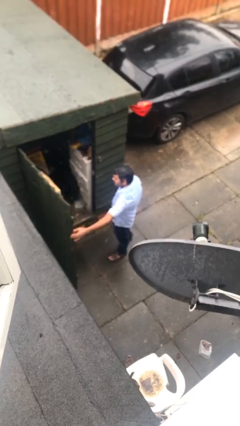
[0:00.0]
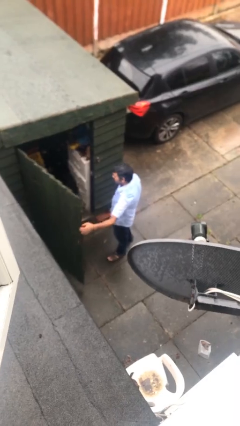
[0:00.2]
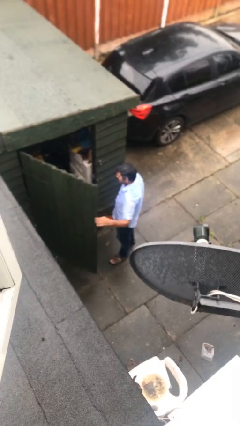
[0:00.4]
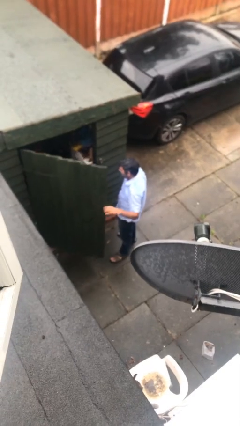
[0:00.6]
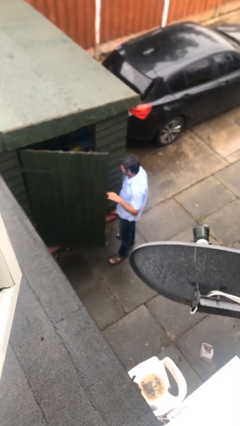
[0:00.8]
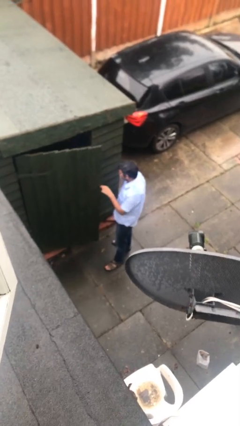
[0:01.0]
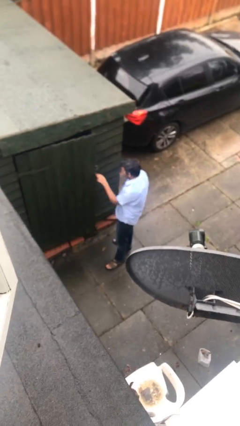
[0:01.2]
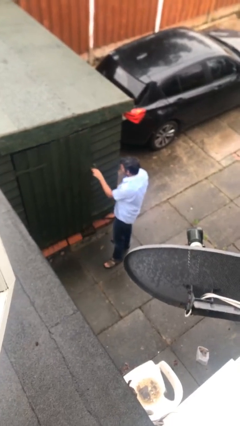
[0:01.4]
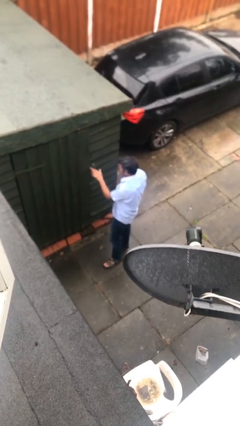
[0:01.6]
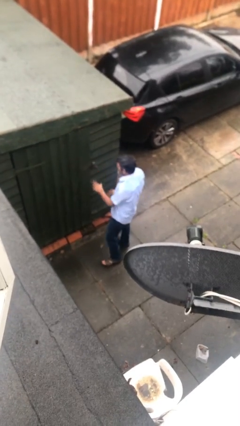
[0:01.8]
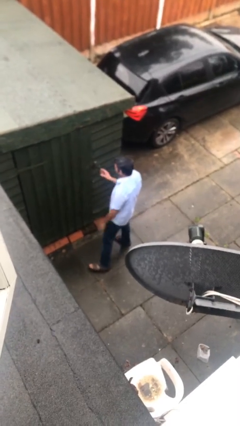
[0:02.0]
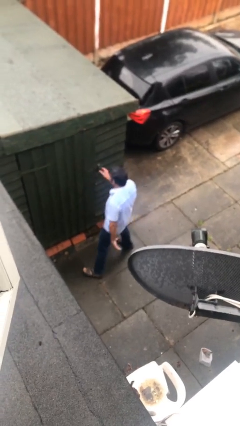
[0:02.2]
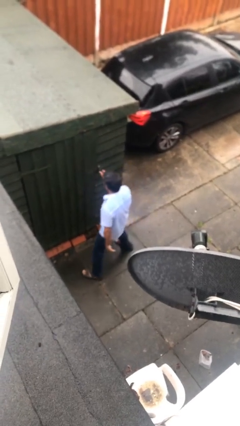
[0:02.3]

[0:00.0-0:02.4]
person closes facility door

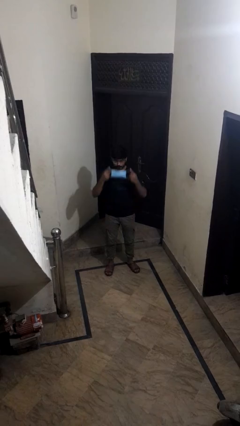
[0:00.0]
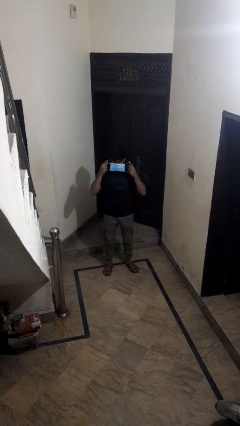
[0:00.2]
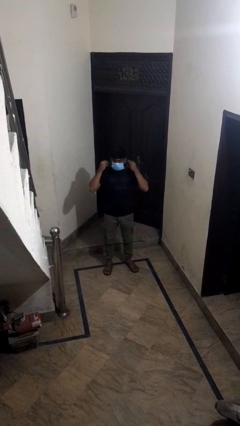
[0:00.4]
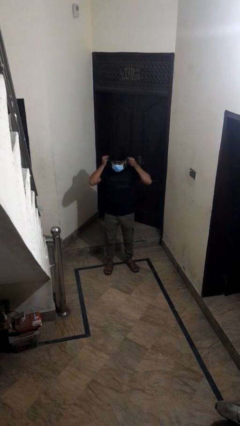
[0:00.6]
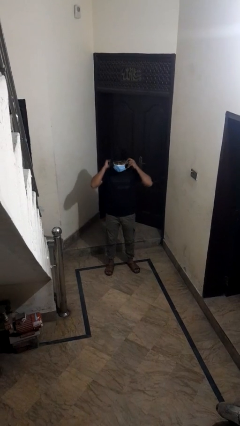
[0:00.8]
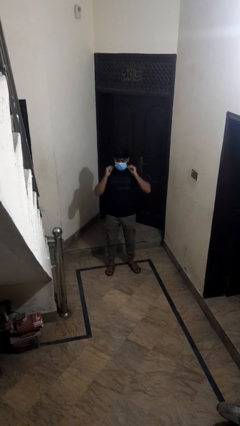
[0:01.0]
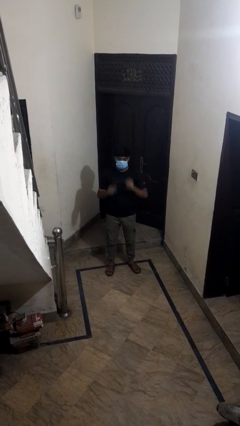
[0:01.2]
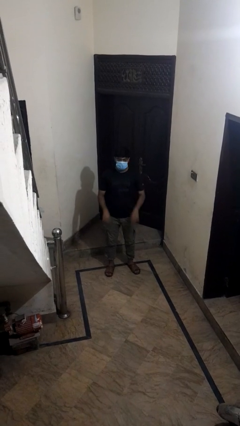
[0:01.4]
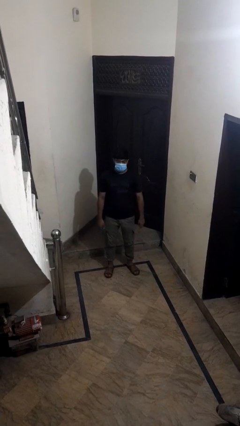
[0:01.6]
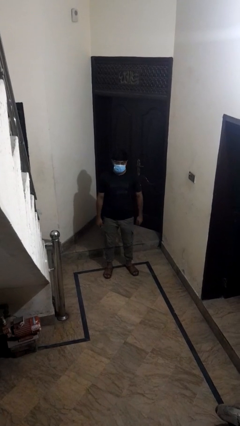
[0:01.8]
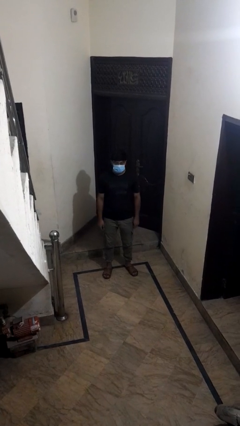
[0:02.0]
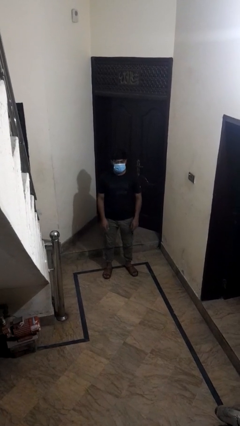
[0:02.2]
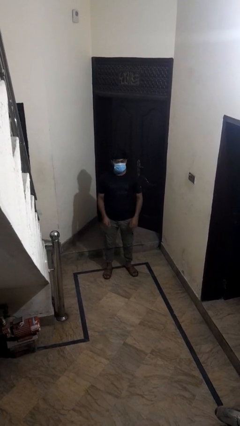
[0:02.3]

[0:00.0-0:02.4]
person puts on facemask

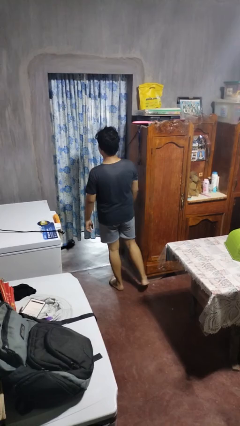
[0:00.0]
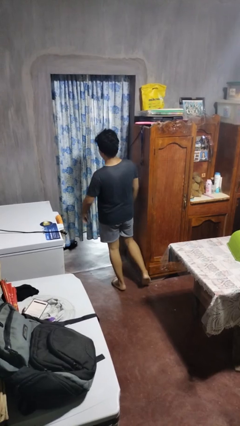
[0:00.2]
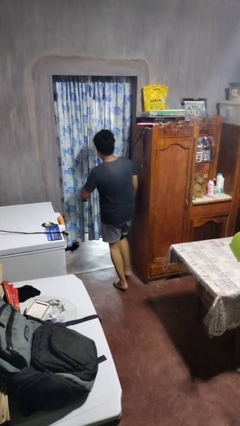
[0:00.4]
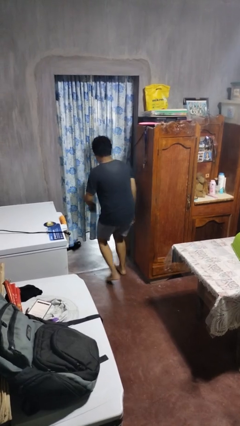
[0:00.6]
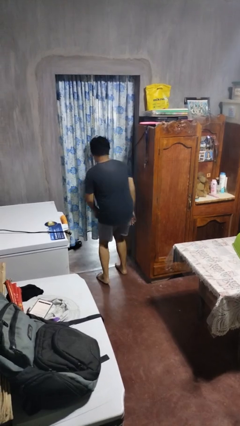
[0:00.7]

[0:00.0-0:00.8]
person stubs toe

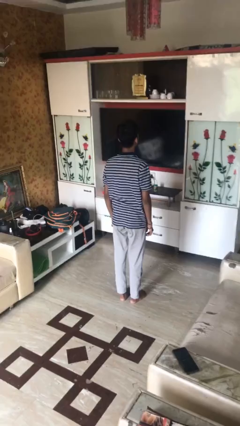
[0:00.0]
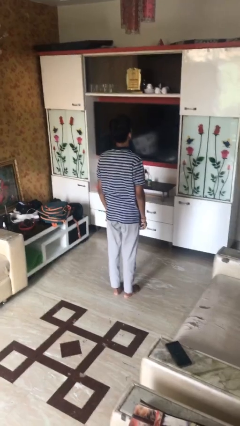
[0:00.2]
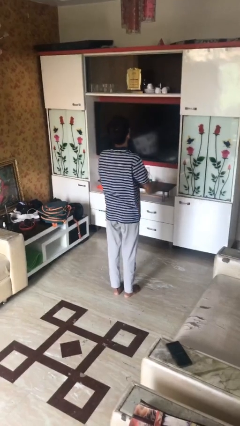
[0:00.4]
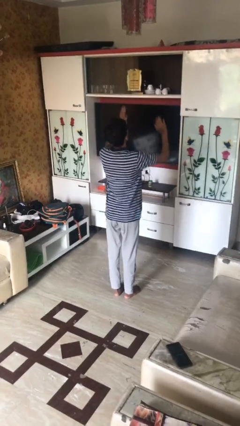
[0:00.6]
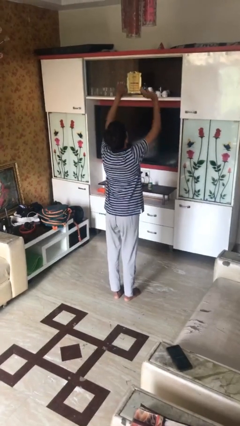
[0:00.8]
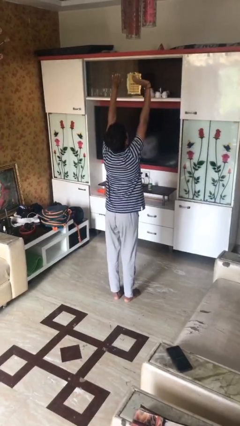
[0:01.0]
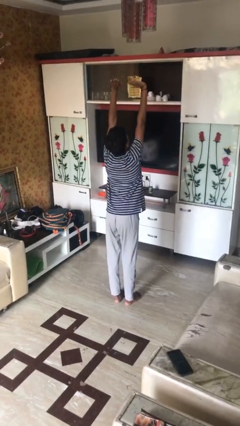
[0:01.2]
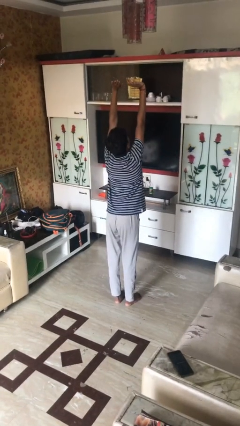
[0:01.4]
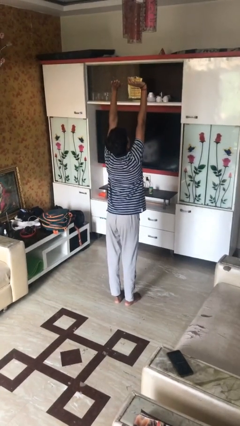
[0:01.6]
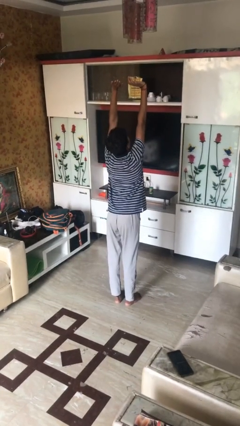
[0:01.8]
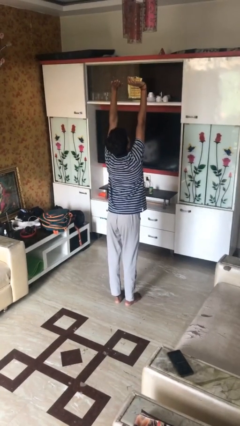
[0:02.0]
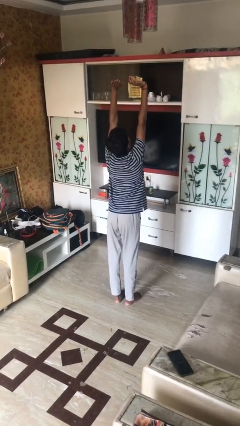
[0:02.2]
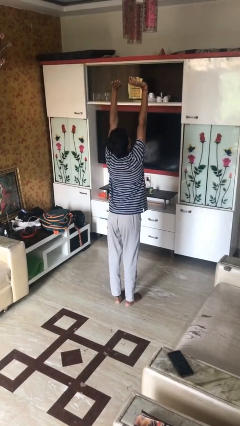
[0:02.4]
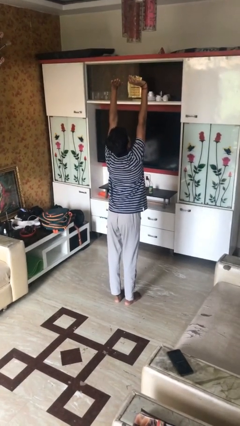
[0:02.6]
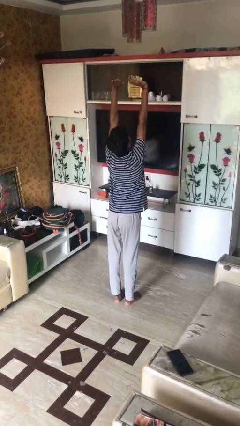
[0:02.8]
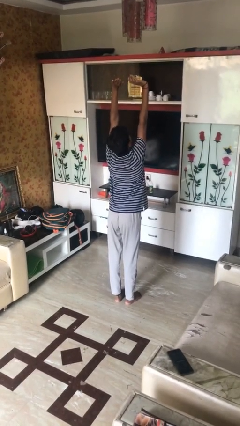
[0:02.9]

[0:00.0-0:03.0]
person stretches arms over head

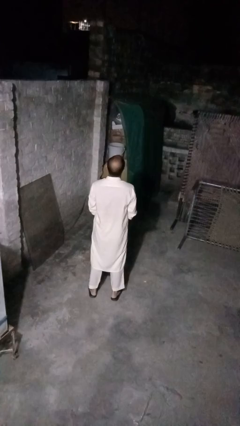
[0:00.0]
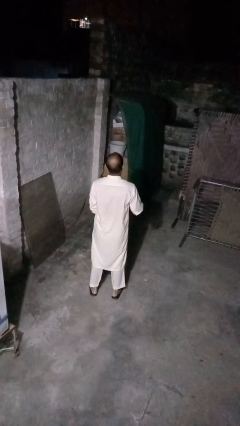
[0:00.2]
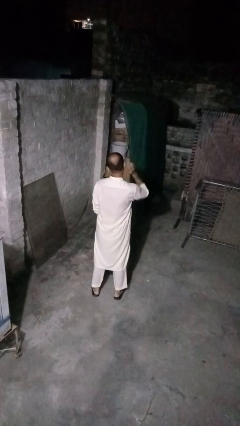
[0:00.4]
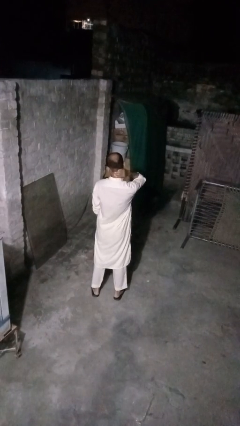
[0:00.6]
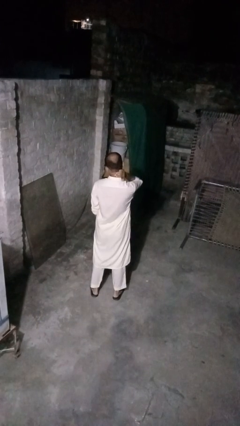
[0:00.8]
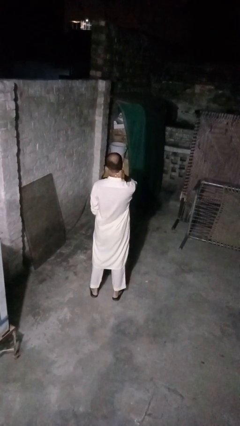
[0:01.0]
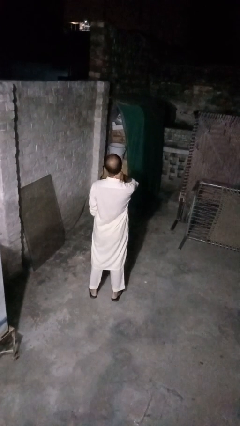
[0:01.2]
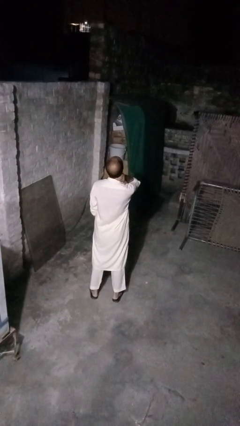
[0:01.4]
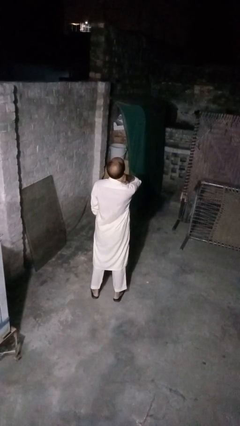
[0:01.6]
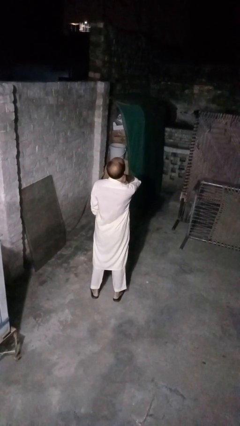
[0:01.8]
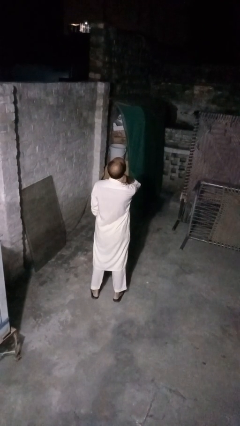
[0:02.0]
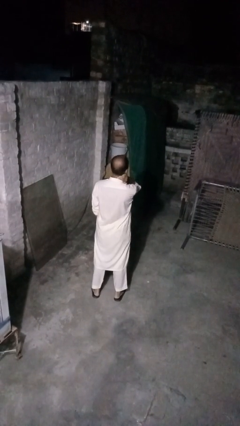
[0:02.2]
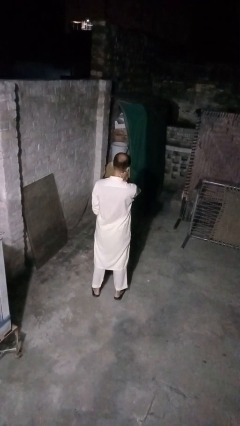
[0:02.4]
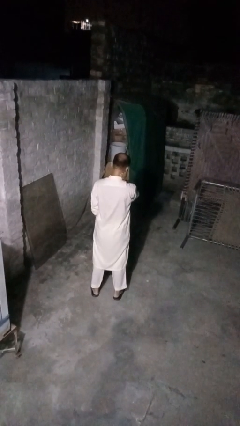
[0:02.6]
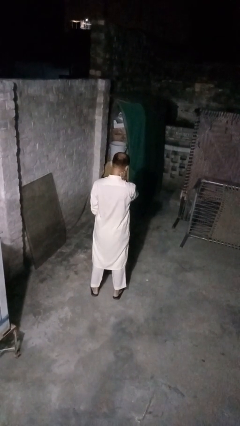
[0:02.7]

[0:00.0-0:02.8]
person rubs neck

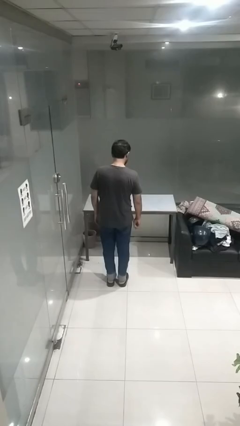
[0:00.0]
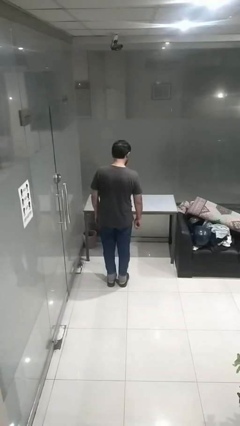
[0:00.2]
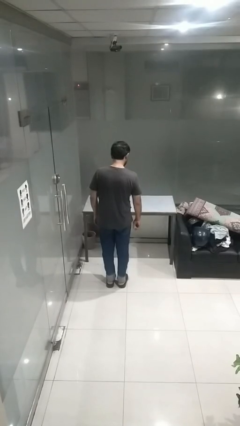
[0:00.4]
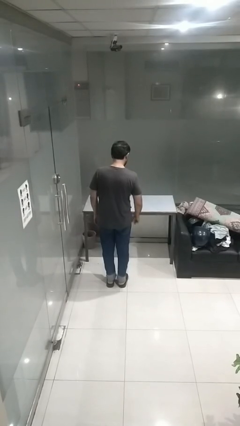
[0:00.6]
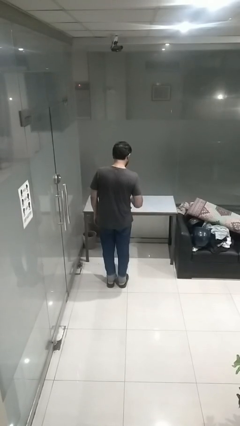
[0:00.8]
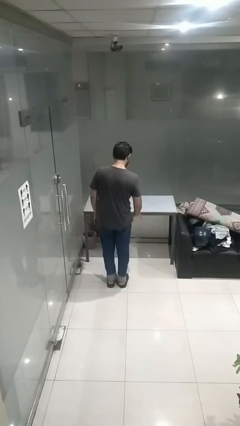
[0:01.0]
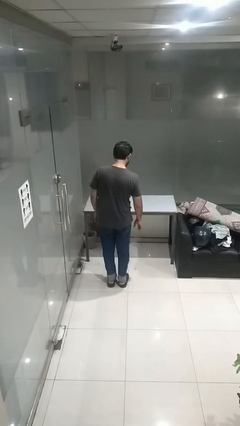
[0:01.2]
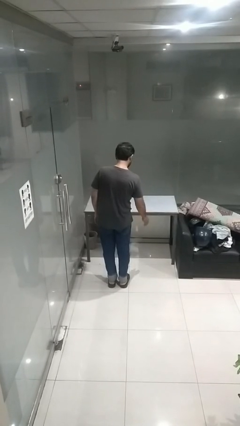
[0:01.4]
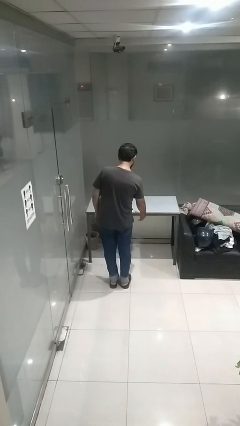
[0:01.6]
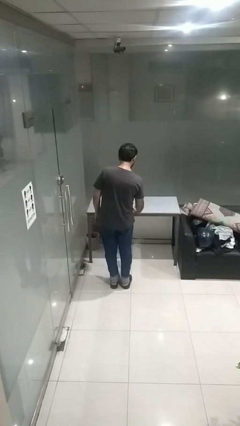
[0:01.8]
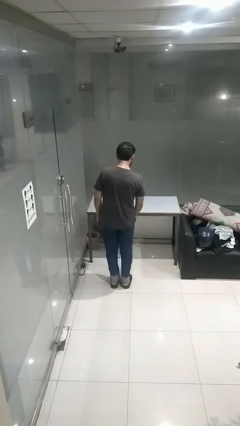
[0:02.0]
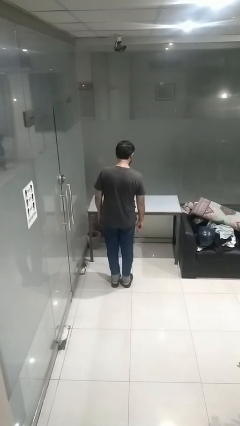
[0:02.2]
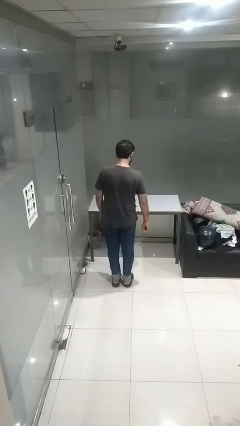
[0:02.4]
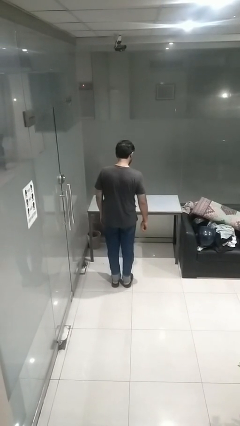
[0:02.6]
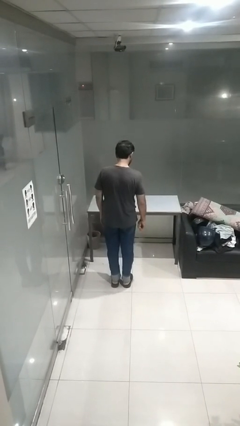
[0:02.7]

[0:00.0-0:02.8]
person bounces ball on floor

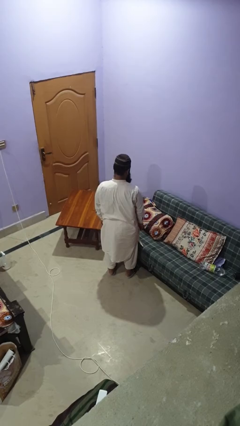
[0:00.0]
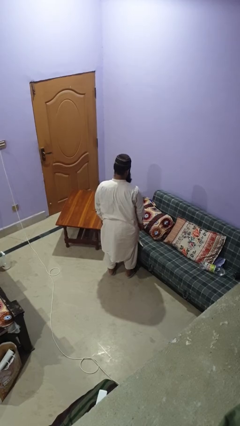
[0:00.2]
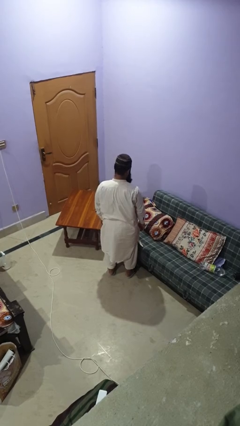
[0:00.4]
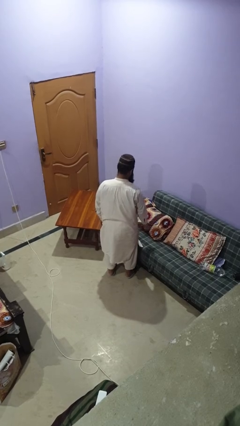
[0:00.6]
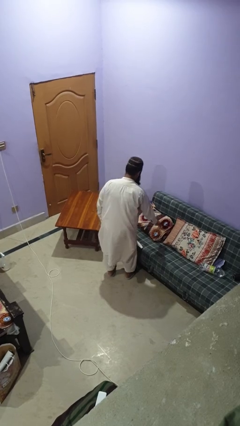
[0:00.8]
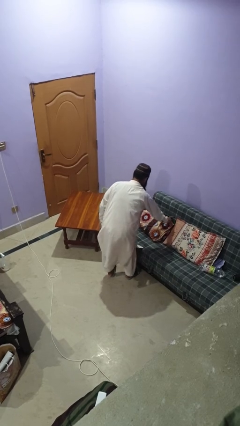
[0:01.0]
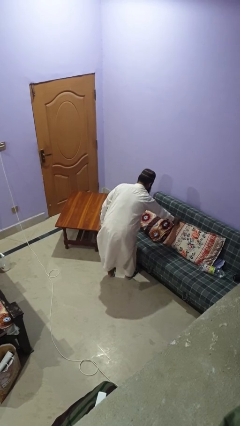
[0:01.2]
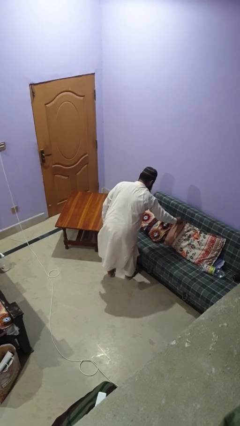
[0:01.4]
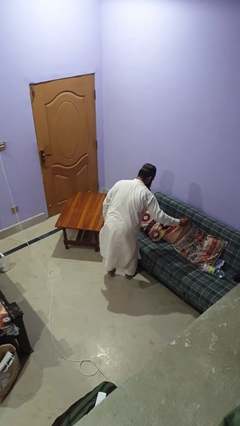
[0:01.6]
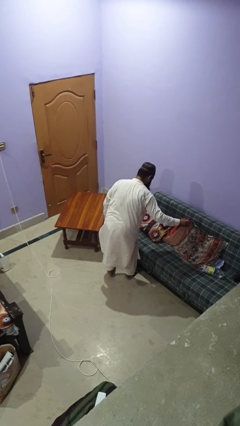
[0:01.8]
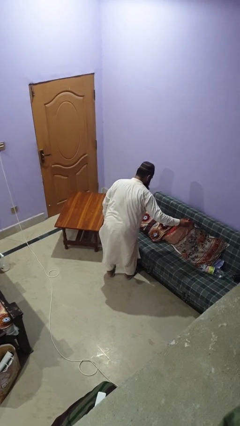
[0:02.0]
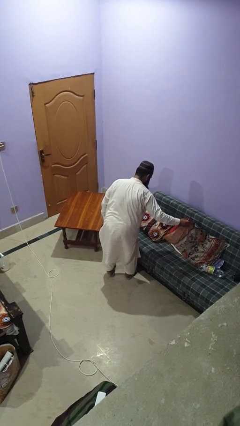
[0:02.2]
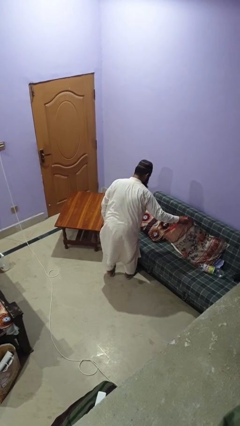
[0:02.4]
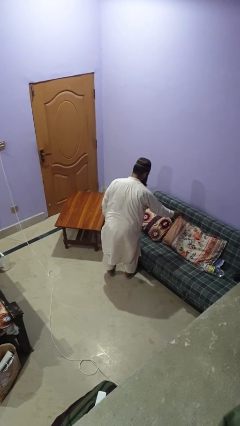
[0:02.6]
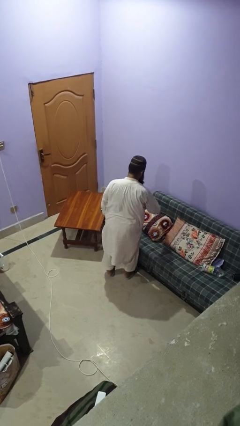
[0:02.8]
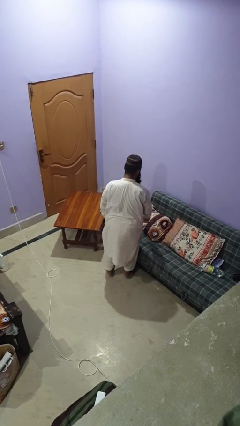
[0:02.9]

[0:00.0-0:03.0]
person searches in couch
